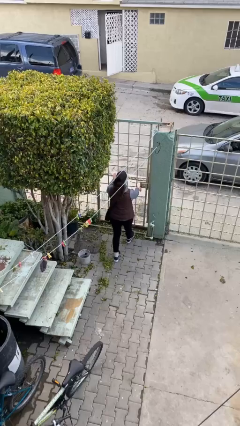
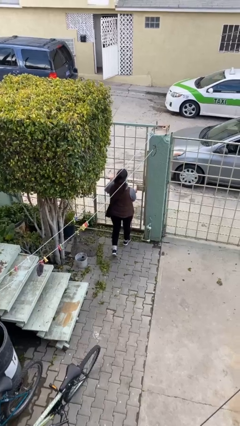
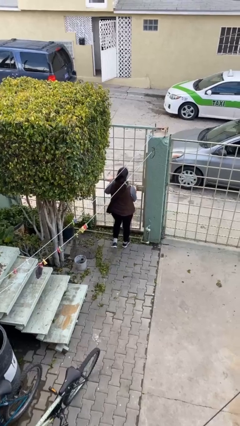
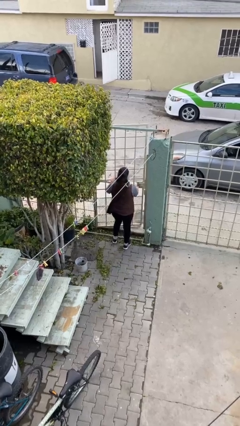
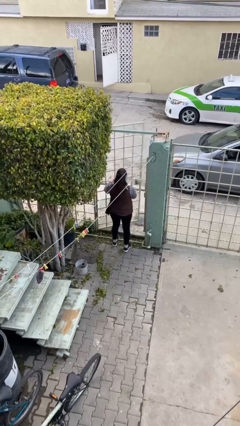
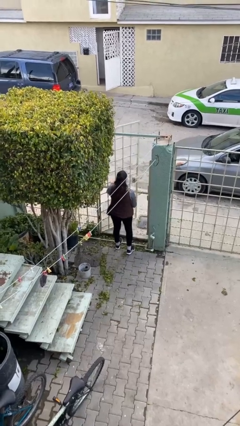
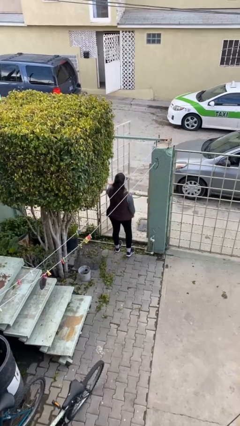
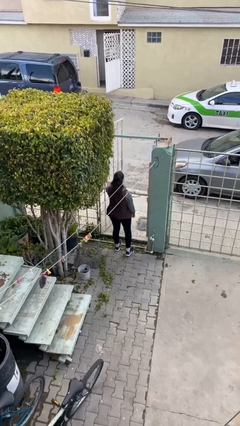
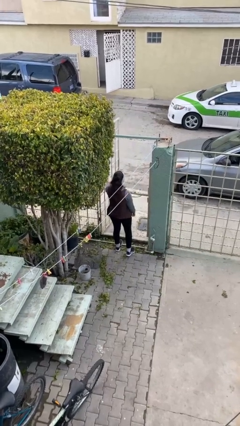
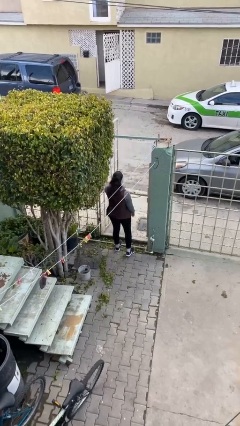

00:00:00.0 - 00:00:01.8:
person opens facility door

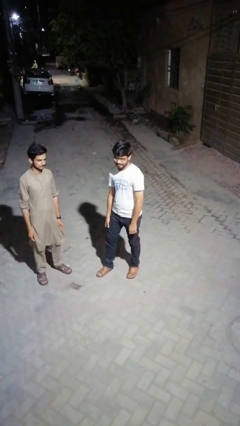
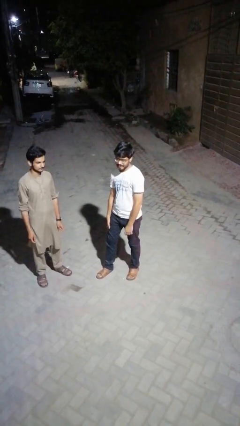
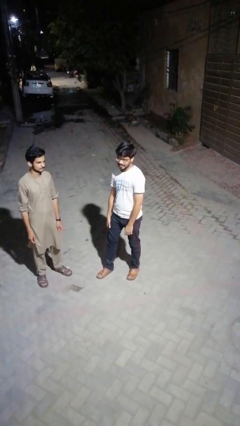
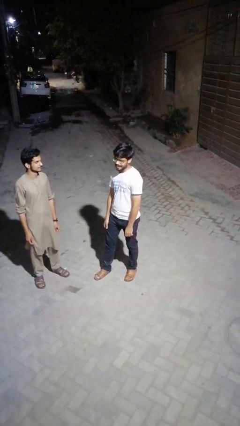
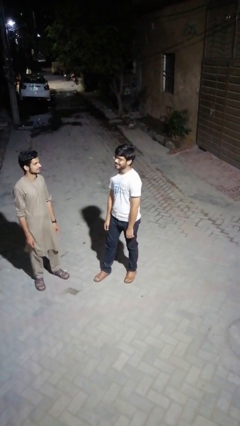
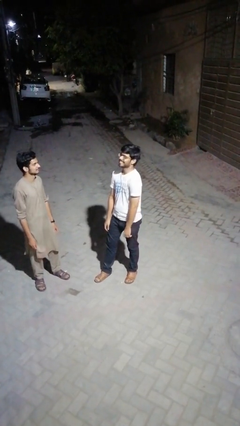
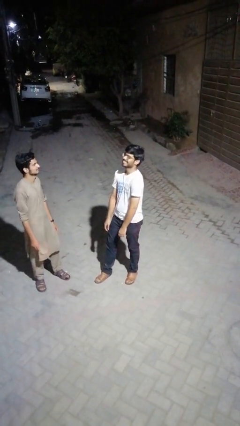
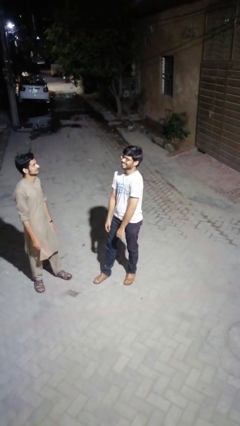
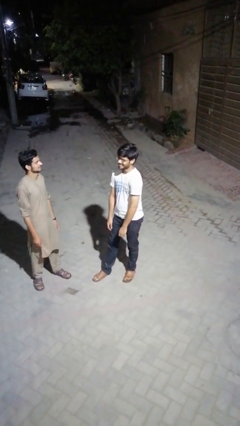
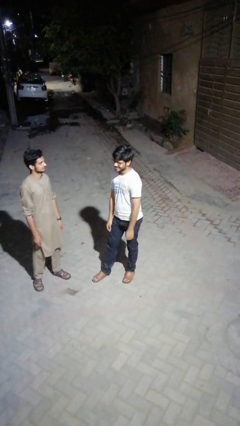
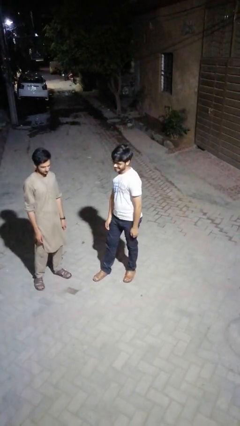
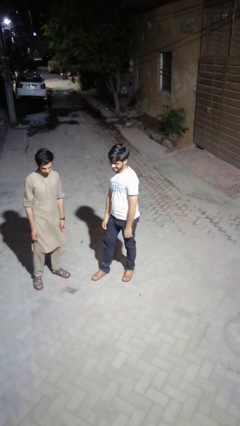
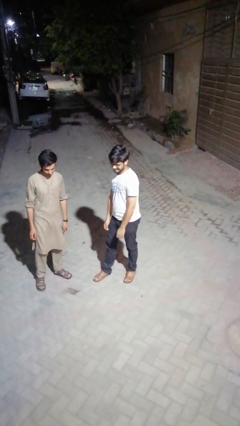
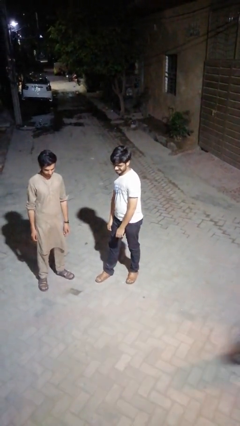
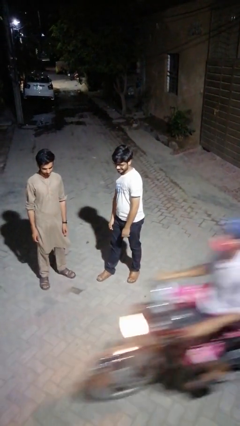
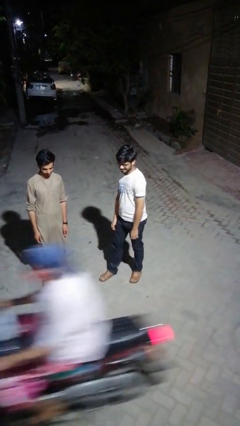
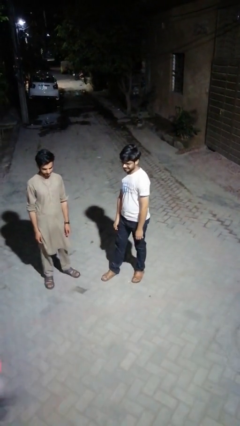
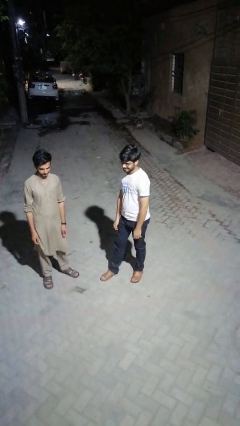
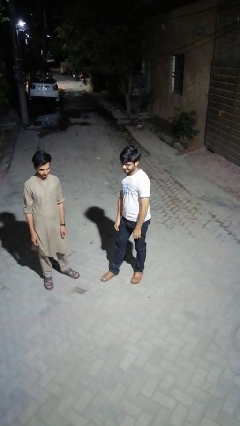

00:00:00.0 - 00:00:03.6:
person laughs with person

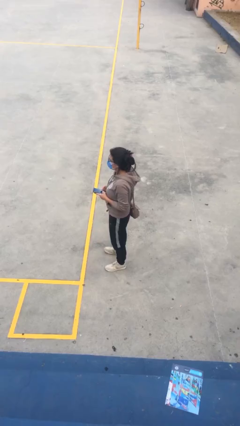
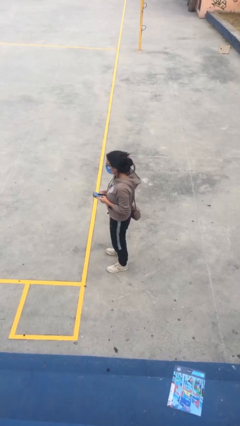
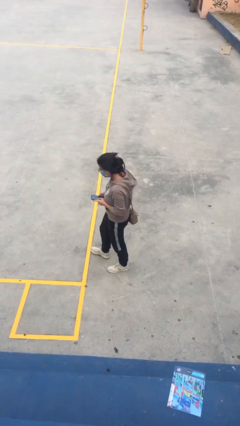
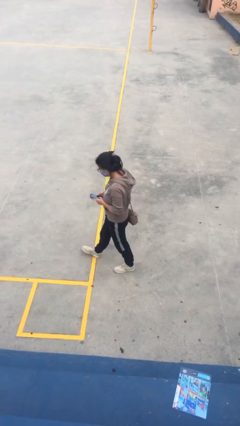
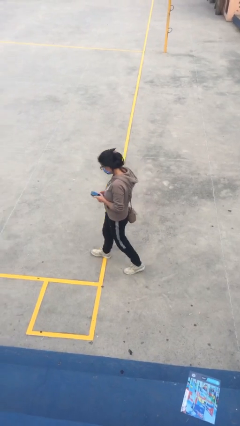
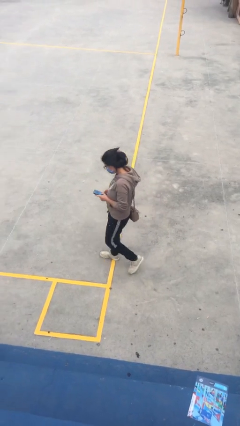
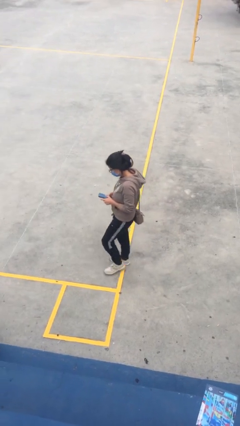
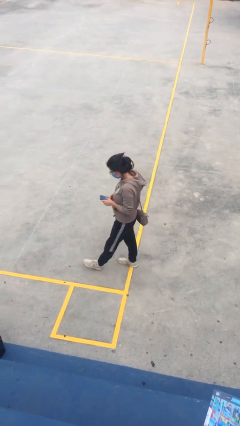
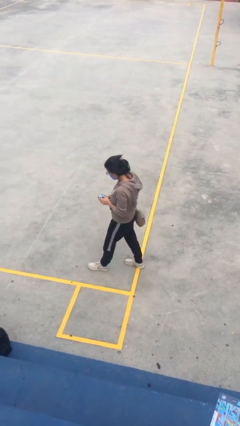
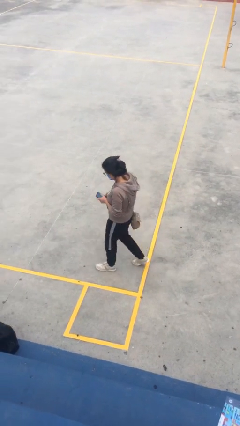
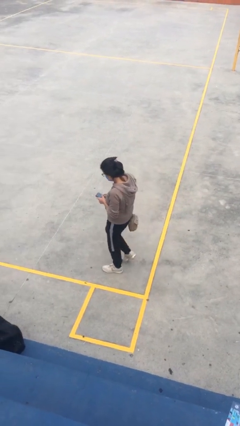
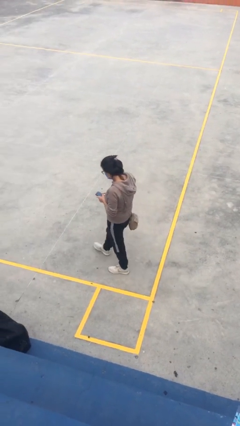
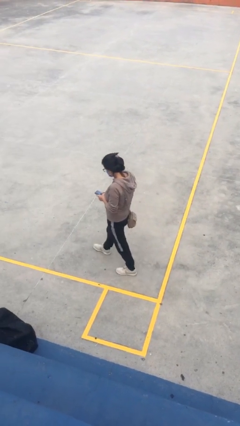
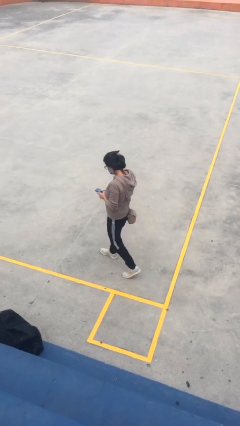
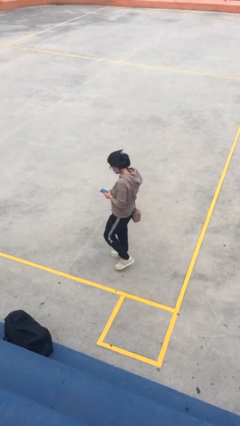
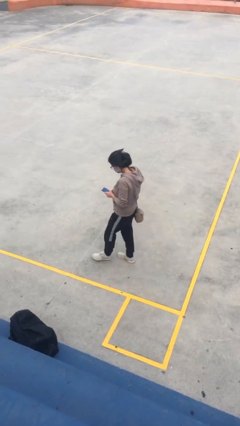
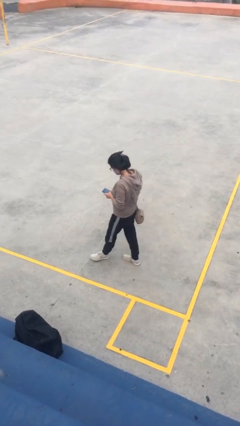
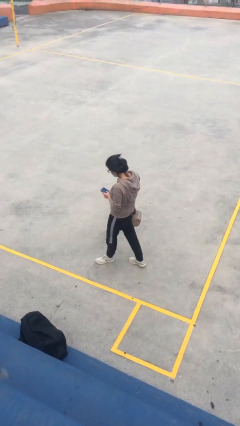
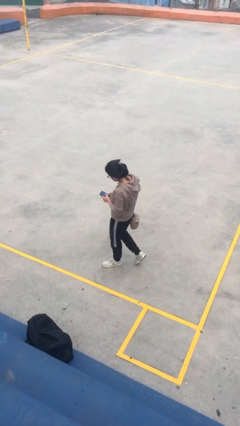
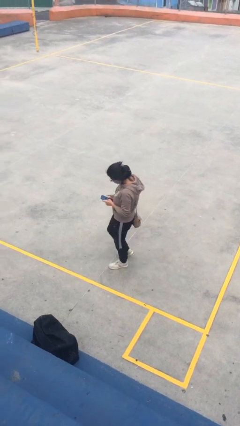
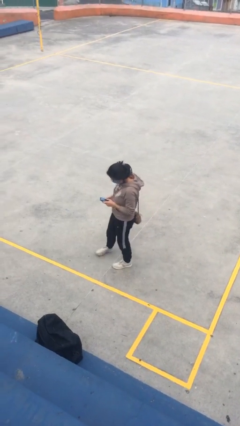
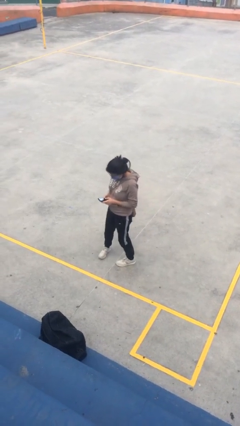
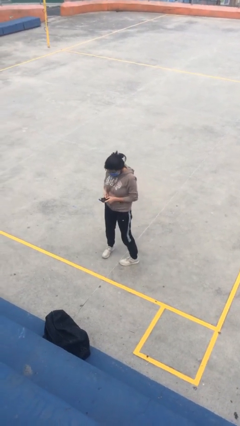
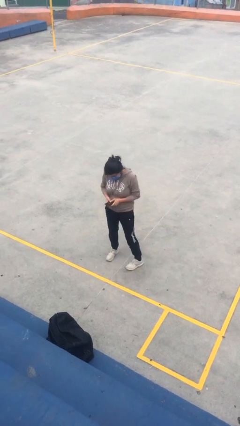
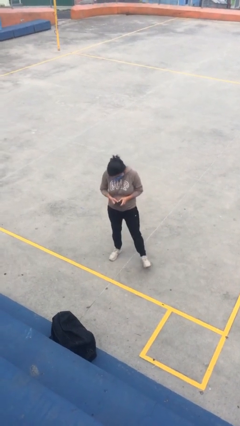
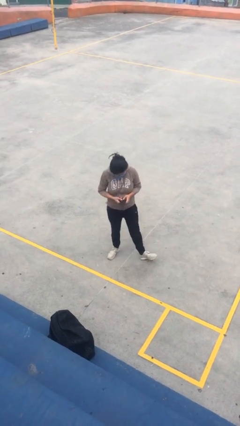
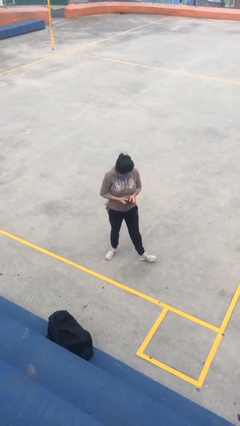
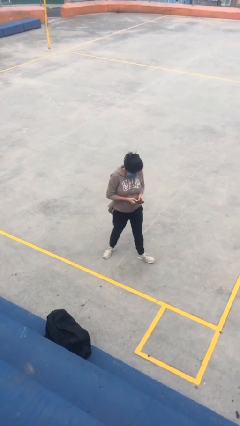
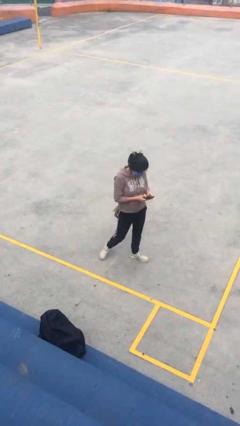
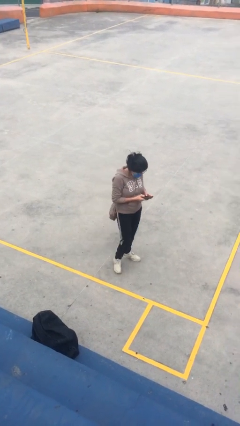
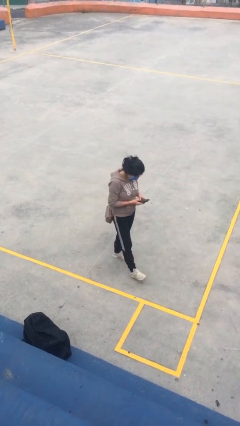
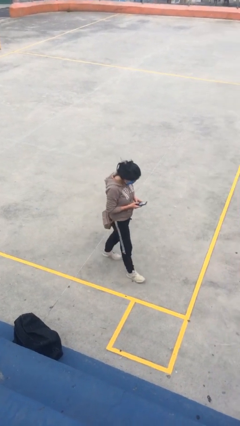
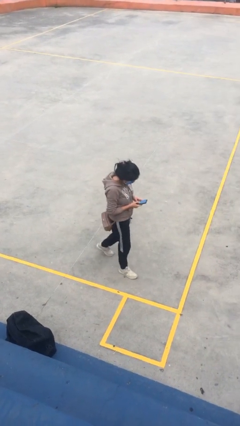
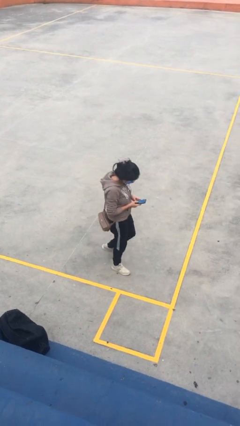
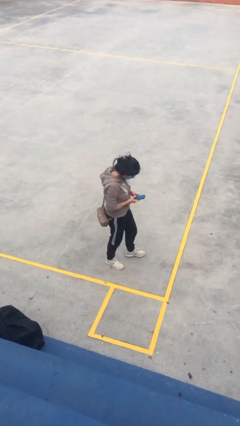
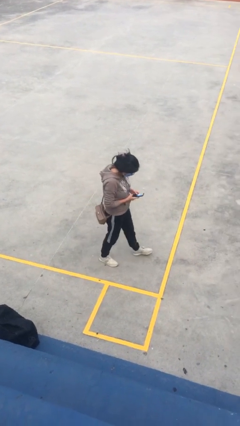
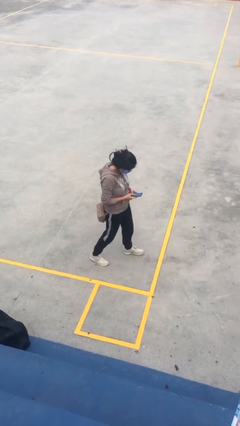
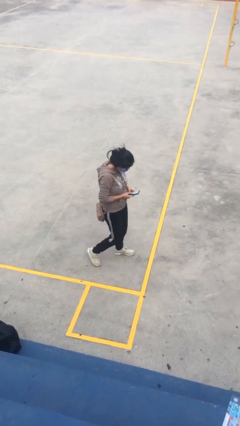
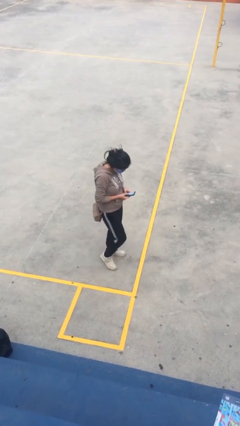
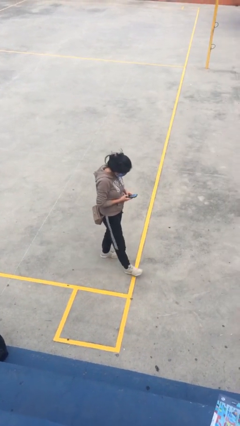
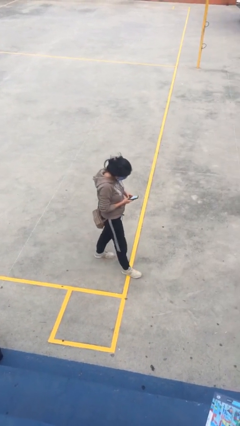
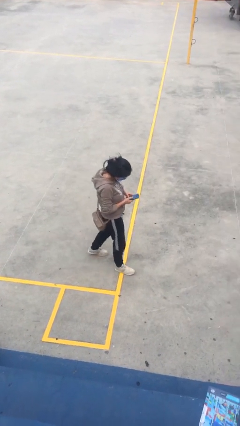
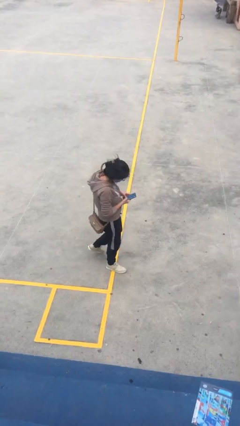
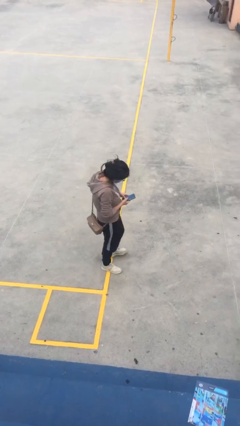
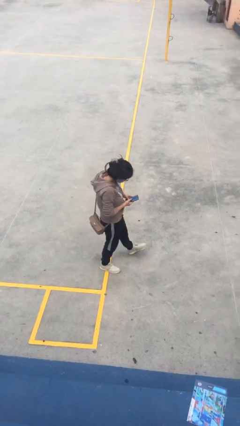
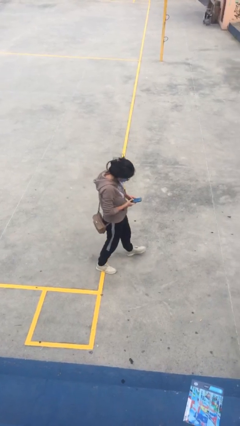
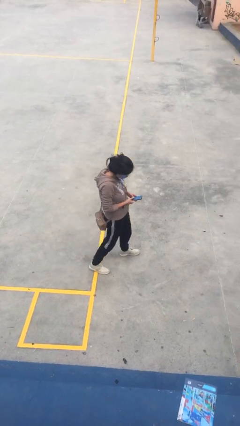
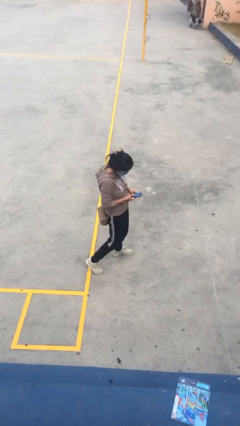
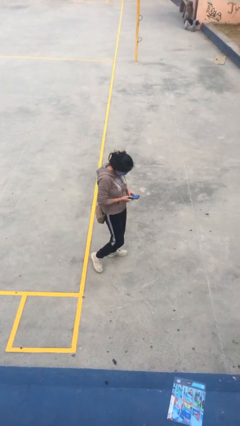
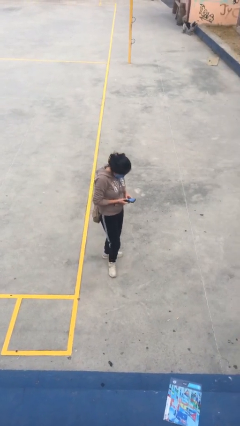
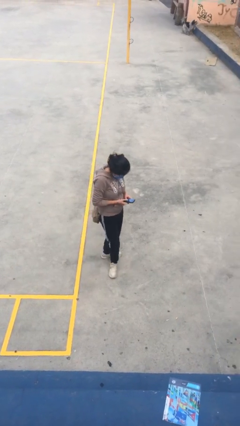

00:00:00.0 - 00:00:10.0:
person texts on phone

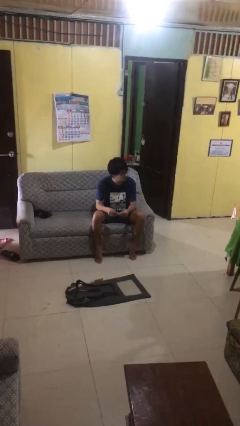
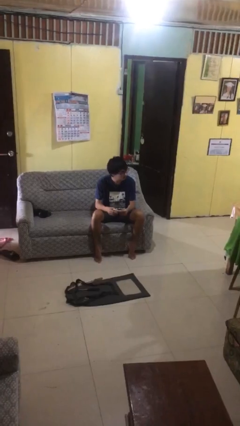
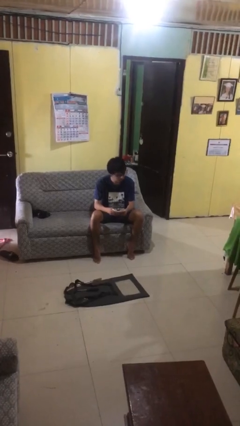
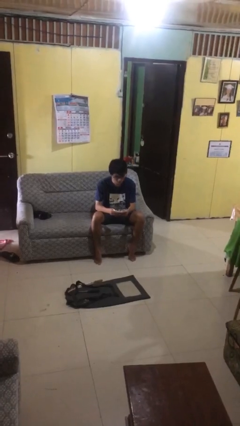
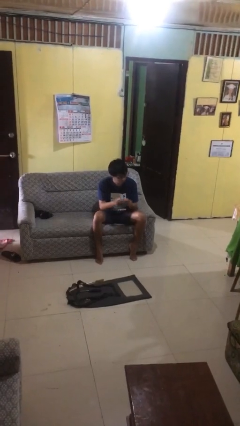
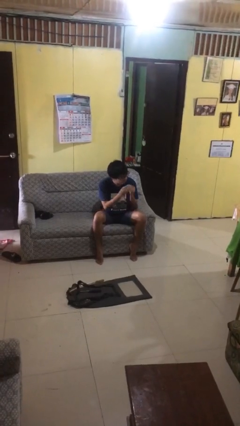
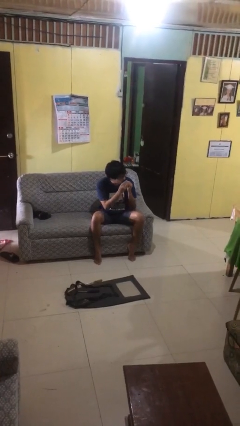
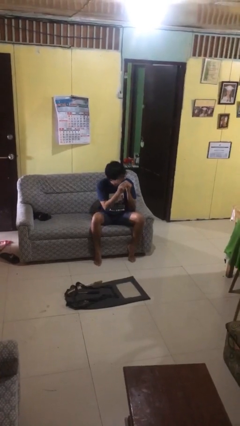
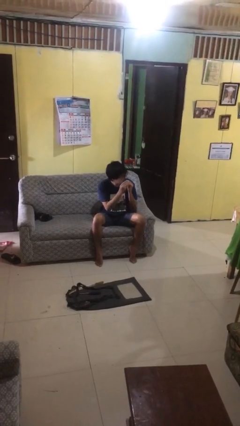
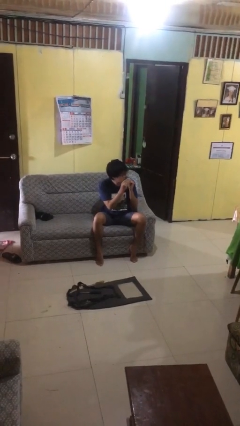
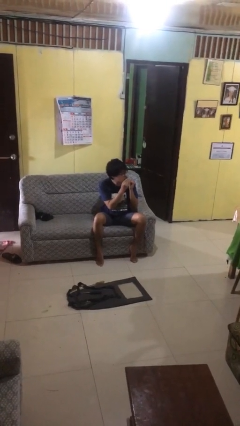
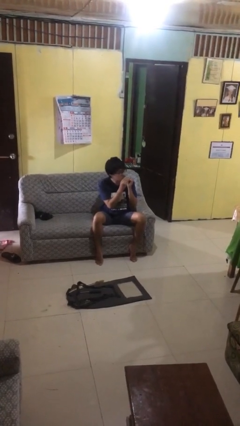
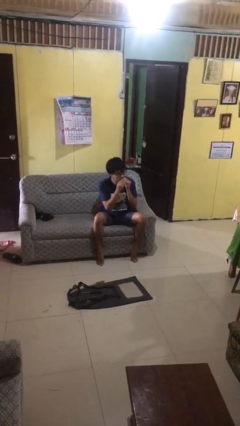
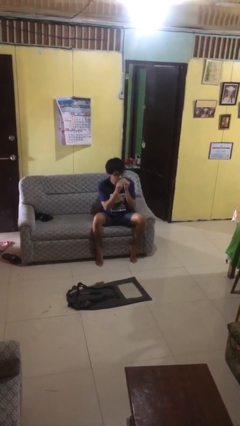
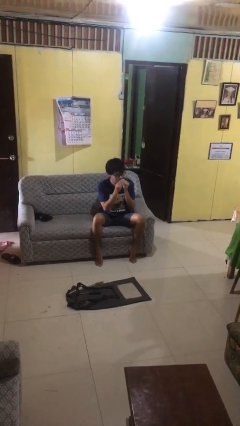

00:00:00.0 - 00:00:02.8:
person wipes mouth with napkin
